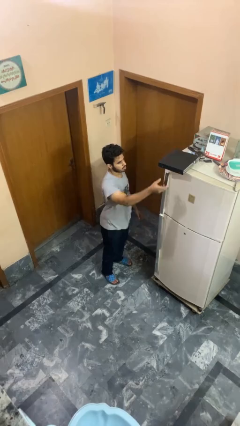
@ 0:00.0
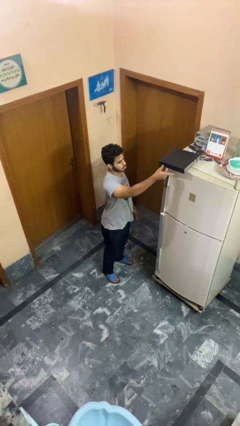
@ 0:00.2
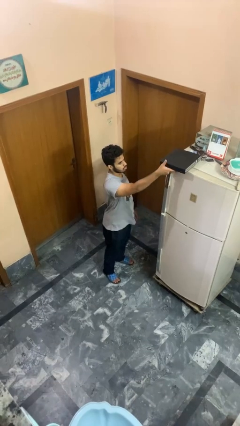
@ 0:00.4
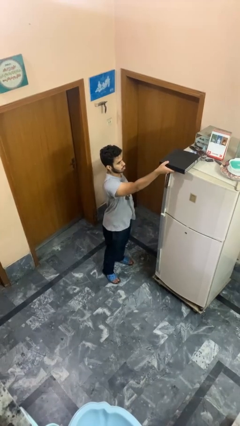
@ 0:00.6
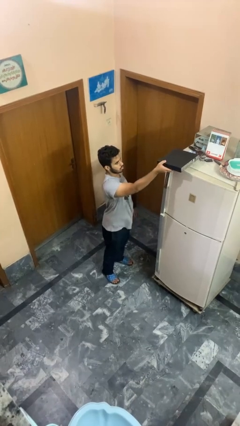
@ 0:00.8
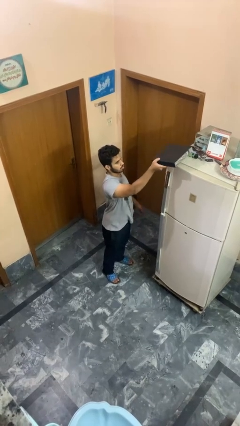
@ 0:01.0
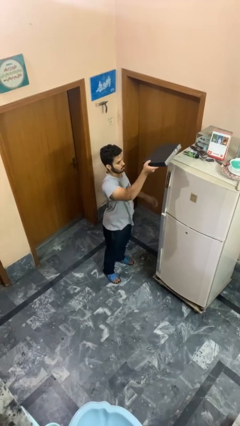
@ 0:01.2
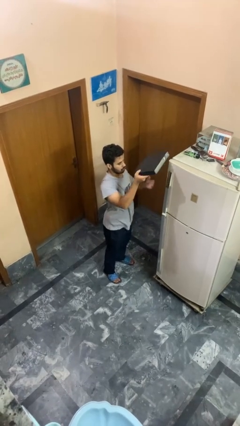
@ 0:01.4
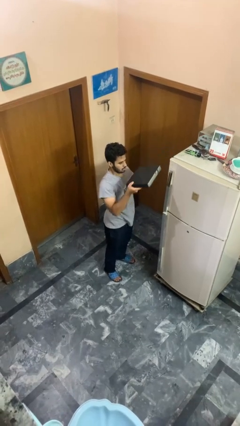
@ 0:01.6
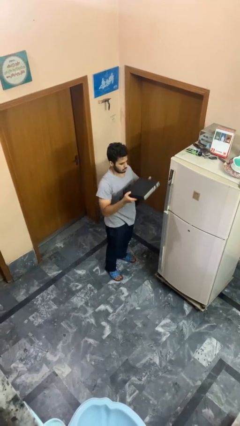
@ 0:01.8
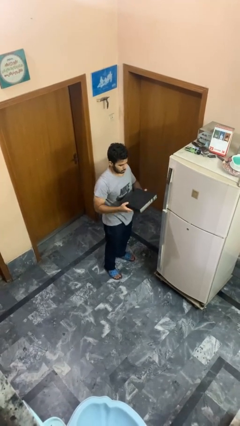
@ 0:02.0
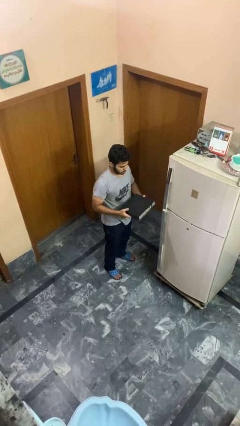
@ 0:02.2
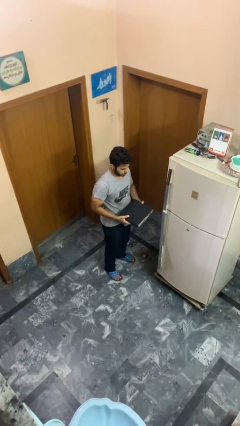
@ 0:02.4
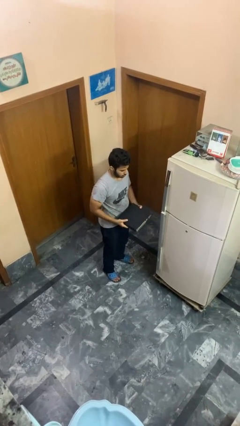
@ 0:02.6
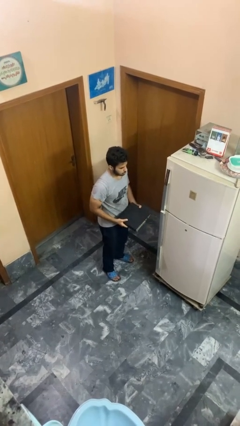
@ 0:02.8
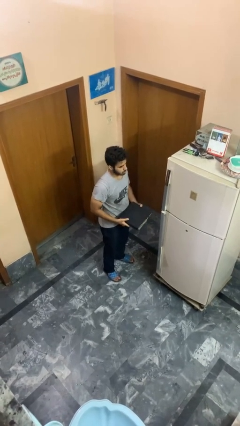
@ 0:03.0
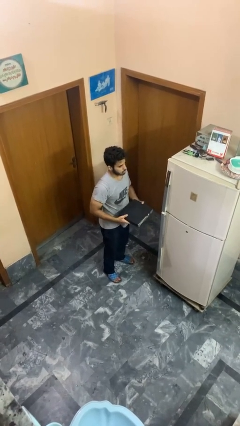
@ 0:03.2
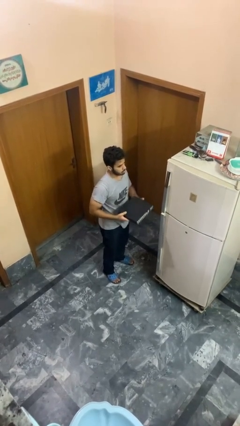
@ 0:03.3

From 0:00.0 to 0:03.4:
person picks up object from countertop

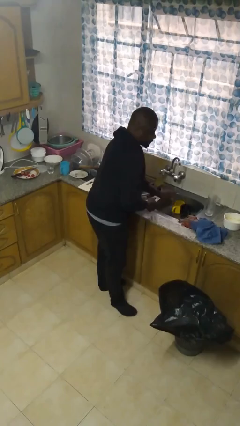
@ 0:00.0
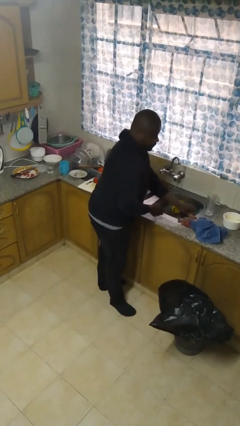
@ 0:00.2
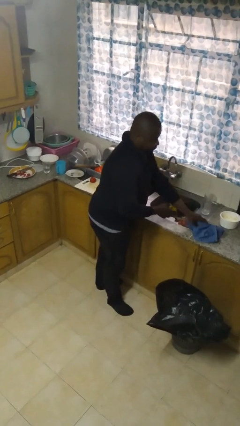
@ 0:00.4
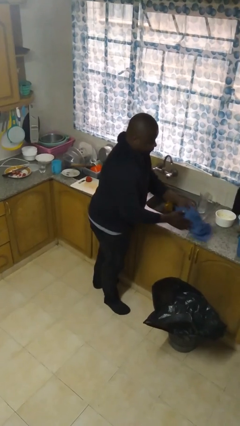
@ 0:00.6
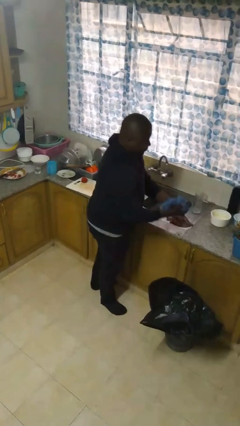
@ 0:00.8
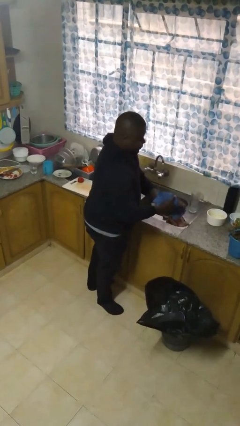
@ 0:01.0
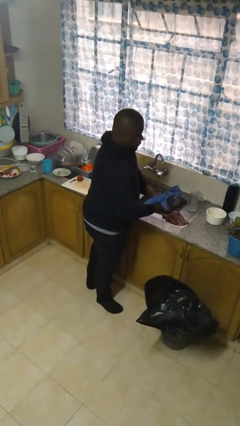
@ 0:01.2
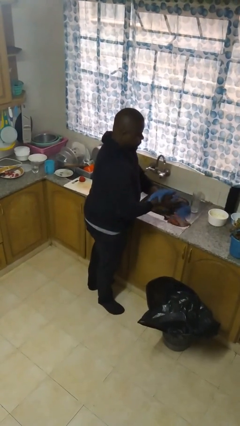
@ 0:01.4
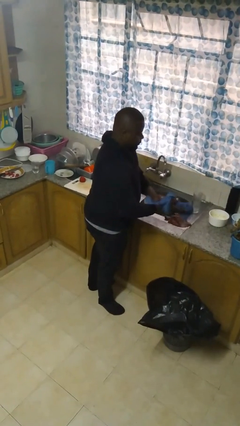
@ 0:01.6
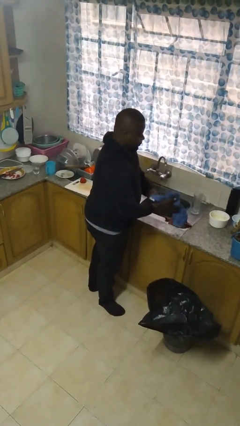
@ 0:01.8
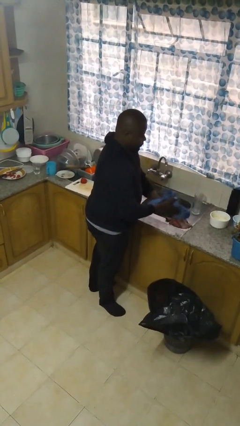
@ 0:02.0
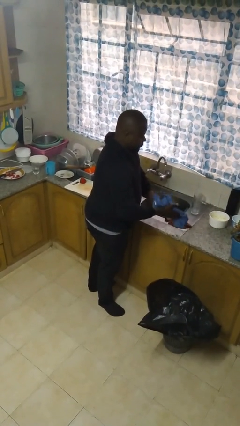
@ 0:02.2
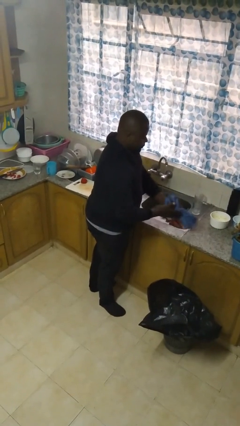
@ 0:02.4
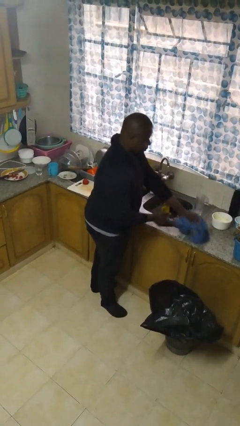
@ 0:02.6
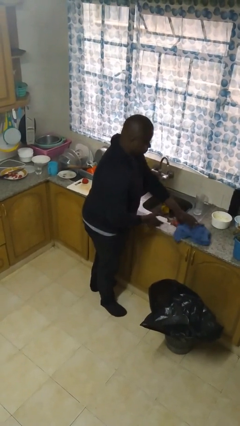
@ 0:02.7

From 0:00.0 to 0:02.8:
person dries hands with towel

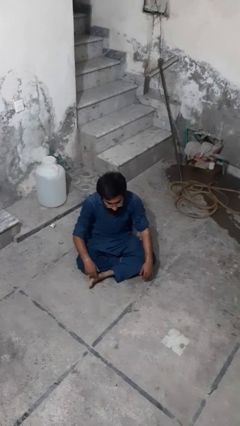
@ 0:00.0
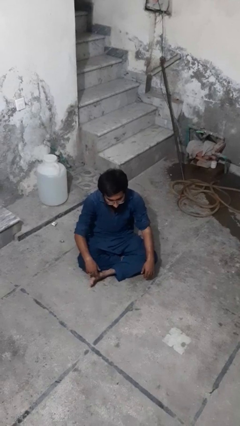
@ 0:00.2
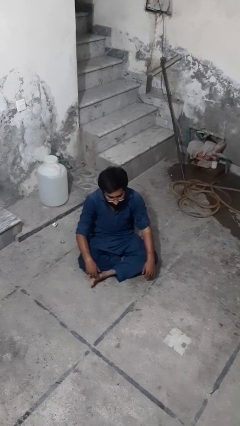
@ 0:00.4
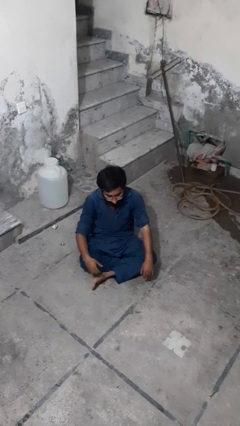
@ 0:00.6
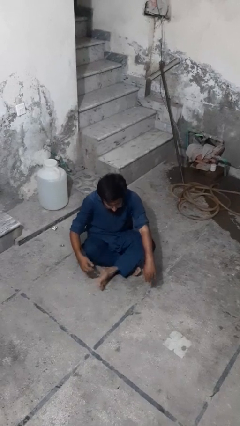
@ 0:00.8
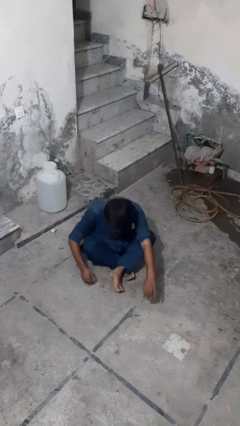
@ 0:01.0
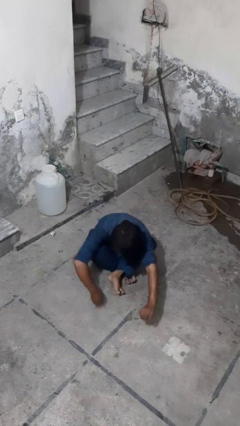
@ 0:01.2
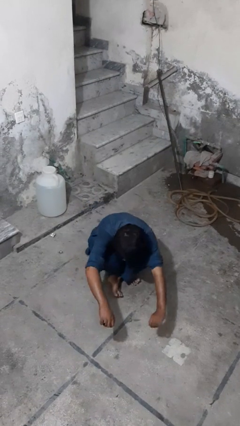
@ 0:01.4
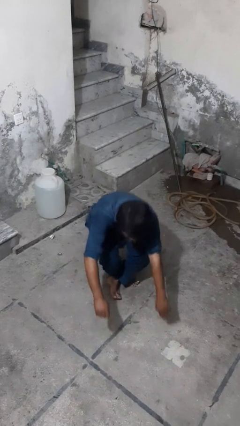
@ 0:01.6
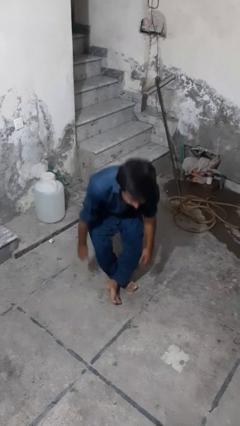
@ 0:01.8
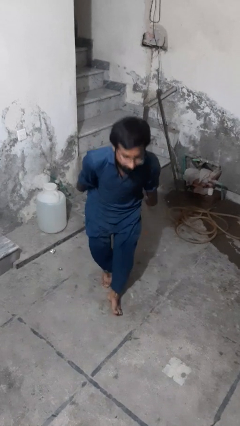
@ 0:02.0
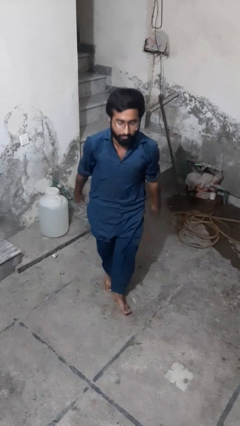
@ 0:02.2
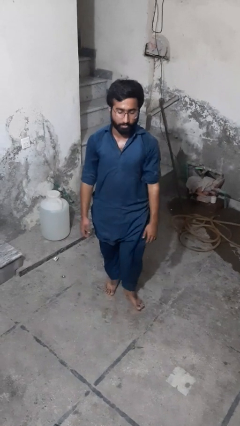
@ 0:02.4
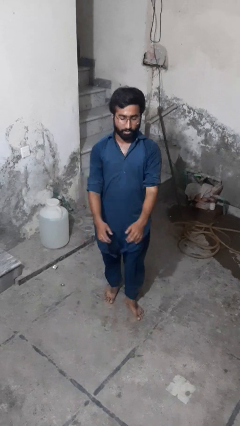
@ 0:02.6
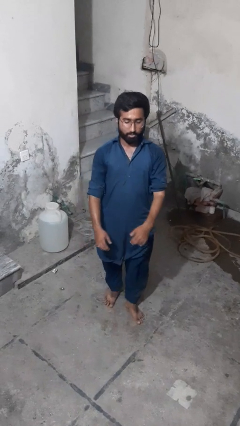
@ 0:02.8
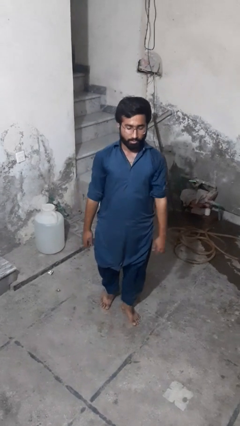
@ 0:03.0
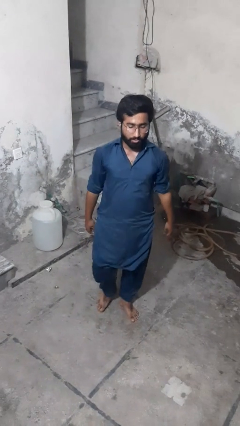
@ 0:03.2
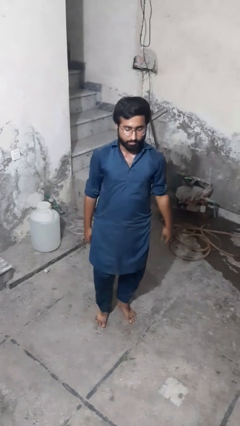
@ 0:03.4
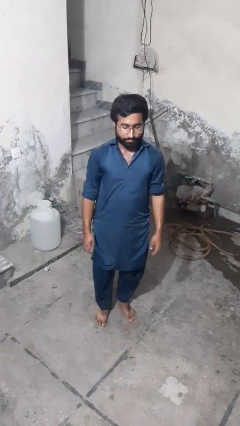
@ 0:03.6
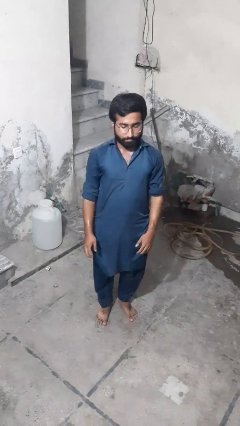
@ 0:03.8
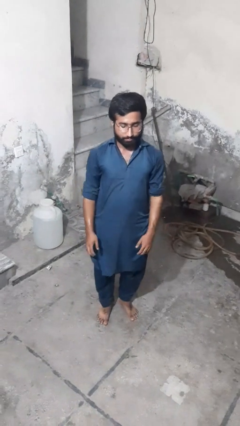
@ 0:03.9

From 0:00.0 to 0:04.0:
person stands up from floor

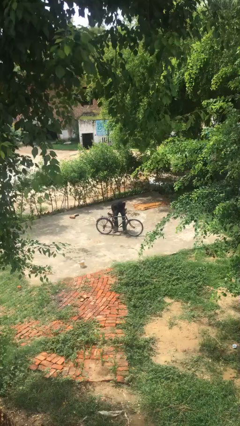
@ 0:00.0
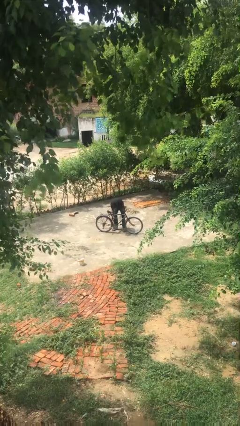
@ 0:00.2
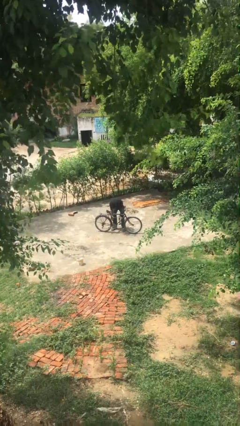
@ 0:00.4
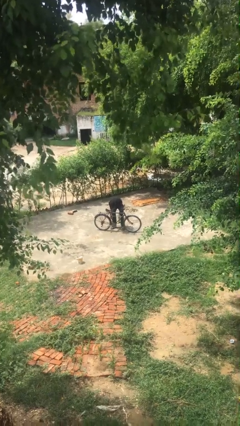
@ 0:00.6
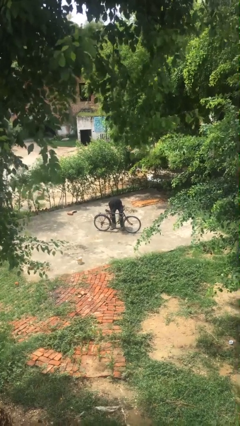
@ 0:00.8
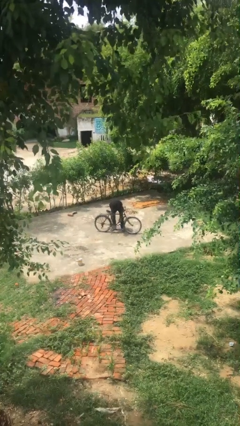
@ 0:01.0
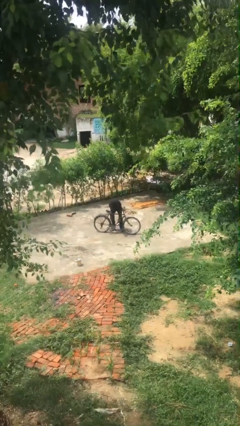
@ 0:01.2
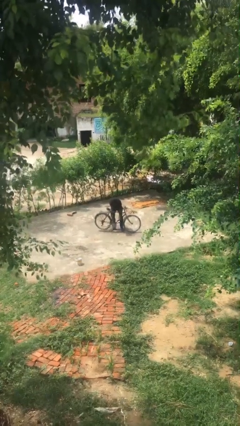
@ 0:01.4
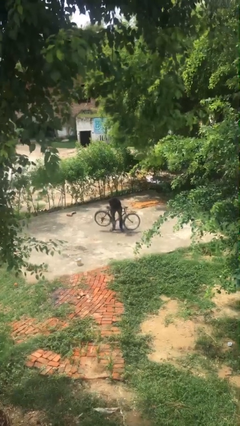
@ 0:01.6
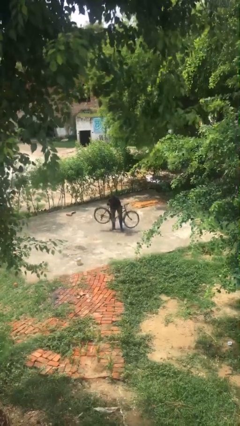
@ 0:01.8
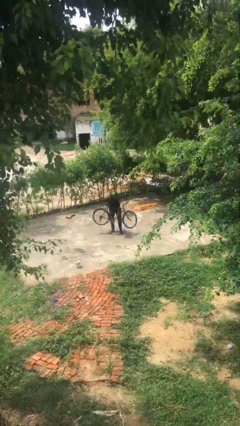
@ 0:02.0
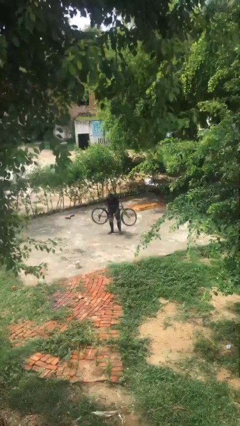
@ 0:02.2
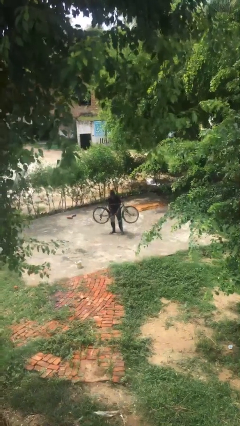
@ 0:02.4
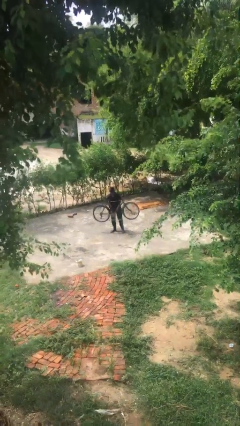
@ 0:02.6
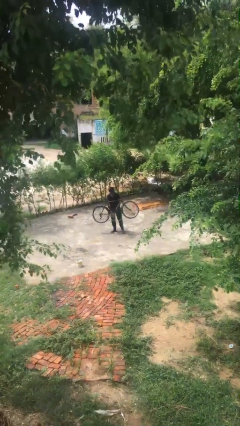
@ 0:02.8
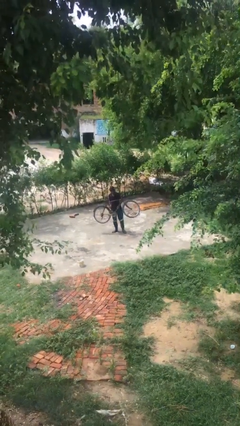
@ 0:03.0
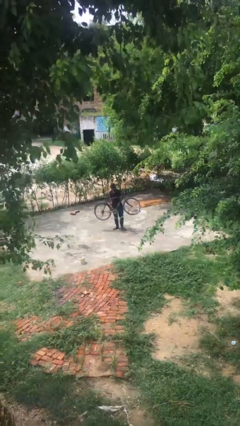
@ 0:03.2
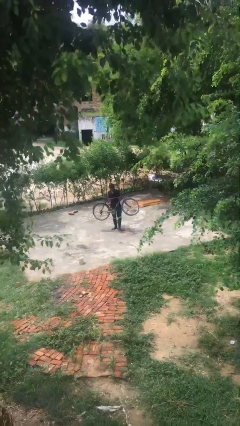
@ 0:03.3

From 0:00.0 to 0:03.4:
person picks up object from floor

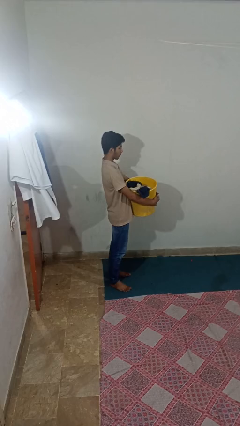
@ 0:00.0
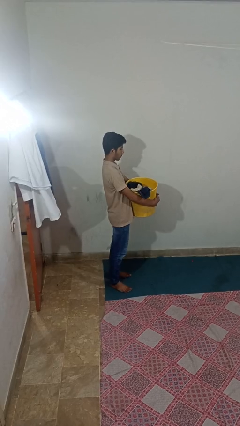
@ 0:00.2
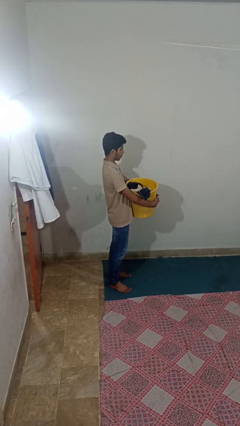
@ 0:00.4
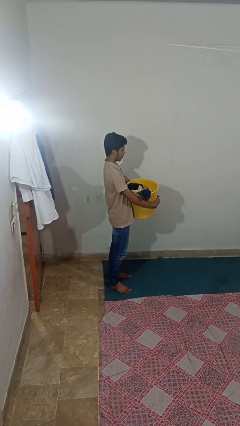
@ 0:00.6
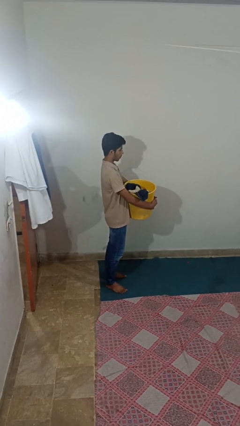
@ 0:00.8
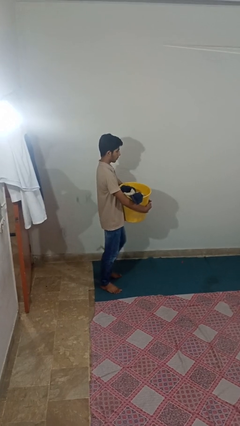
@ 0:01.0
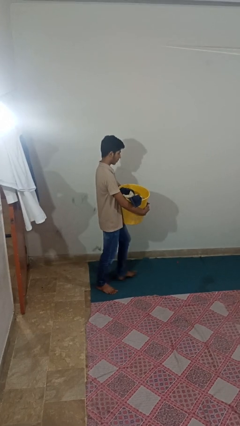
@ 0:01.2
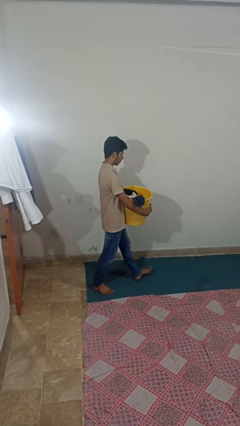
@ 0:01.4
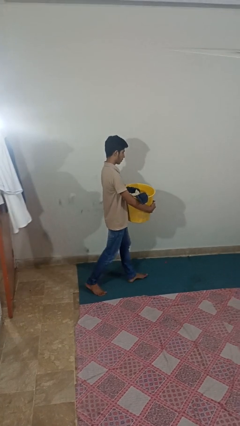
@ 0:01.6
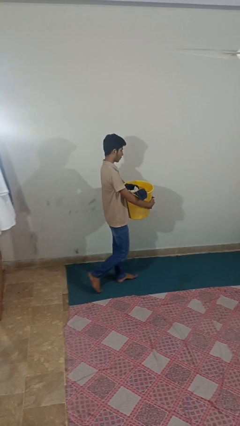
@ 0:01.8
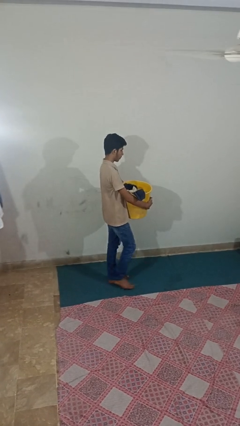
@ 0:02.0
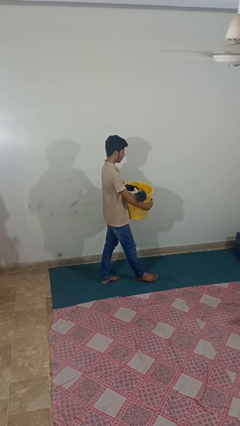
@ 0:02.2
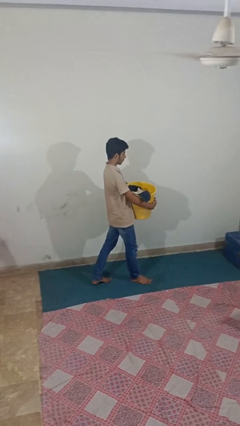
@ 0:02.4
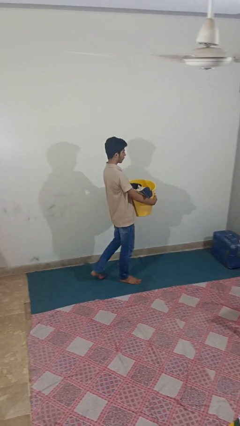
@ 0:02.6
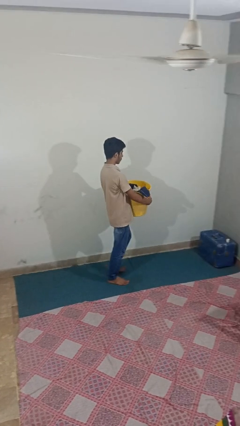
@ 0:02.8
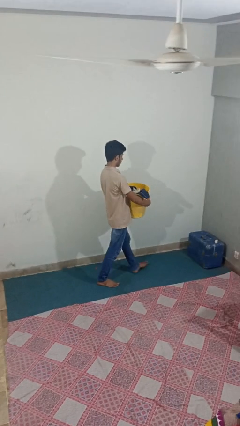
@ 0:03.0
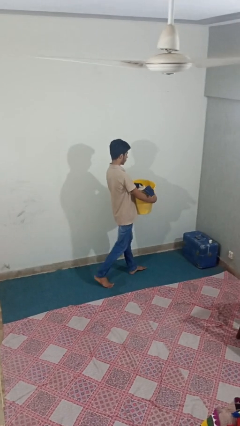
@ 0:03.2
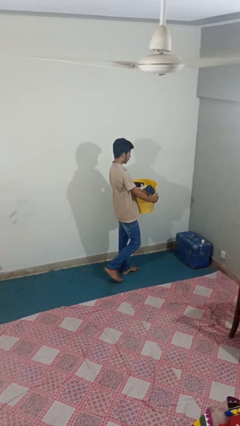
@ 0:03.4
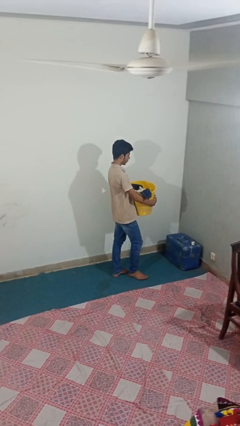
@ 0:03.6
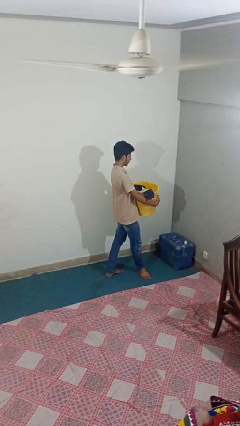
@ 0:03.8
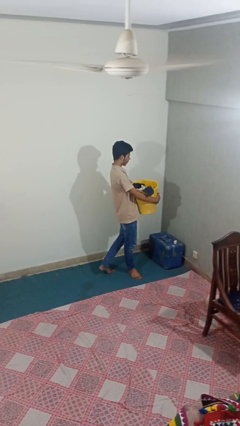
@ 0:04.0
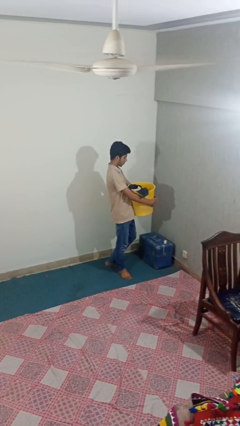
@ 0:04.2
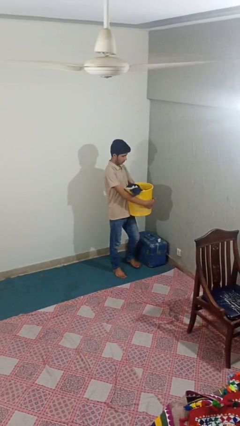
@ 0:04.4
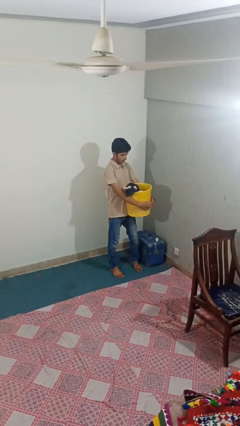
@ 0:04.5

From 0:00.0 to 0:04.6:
person carries laundry basket
